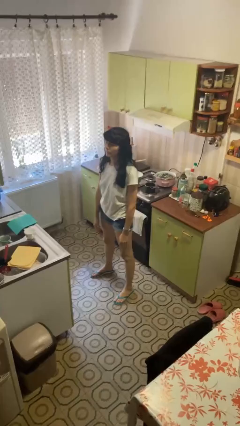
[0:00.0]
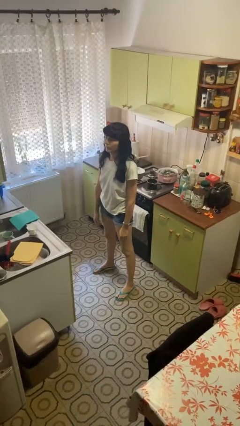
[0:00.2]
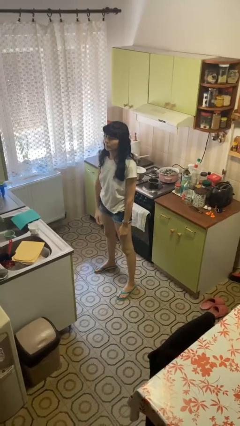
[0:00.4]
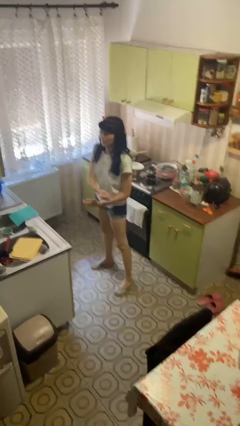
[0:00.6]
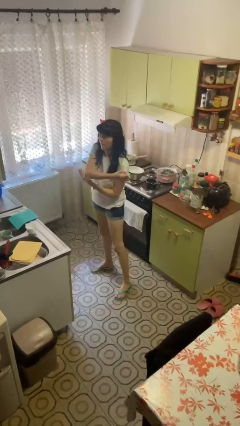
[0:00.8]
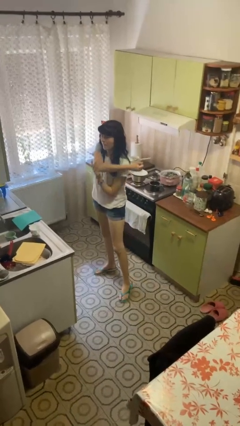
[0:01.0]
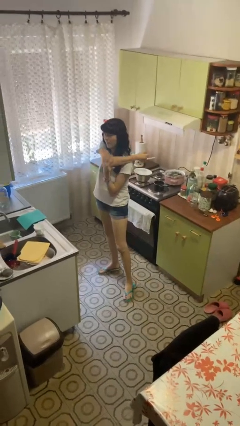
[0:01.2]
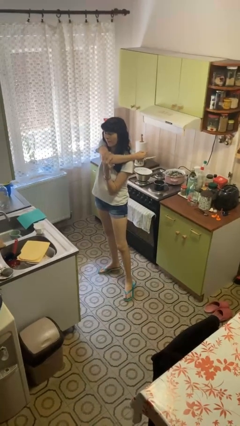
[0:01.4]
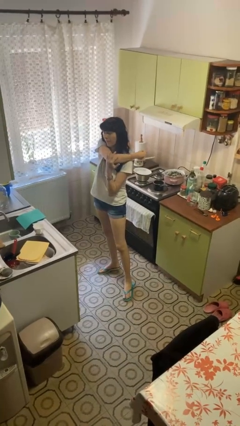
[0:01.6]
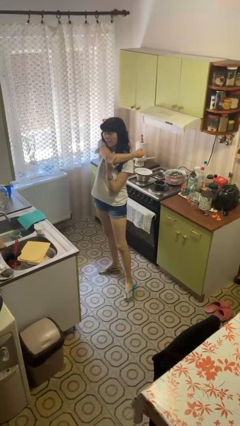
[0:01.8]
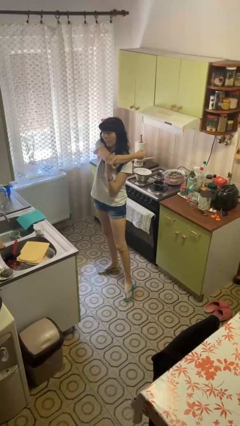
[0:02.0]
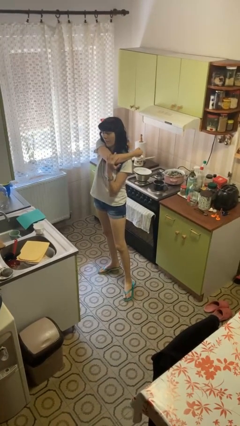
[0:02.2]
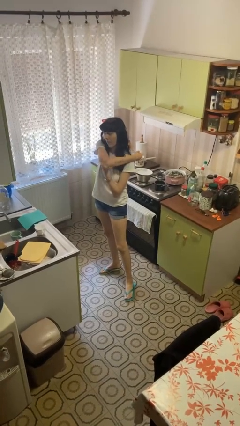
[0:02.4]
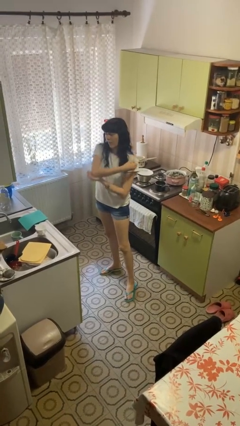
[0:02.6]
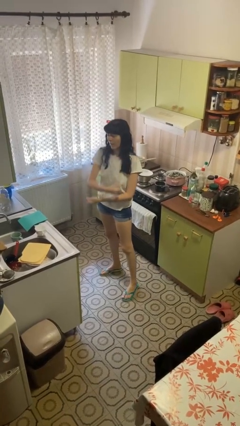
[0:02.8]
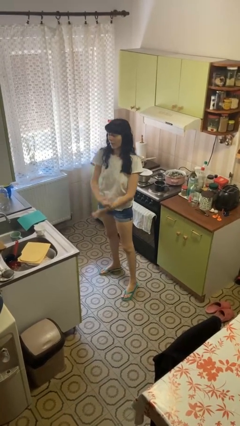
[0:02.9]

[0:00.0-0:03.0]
person stretches arms to side

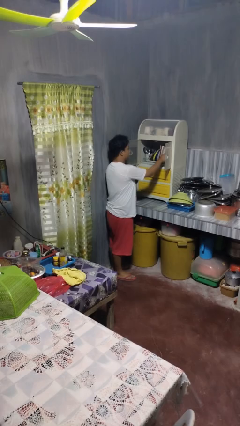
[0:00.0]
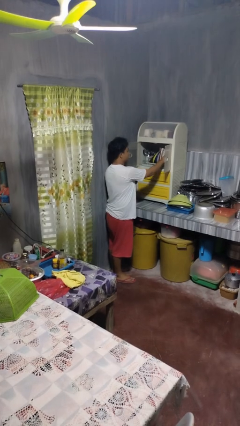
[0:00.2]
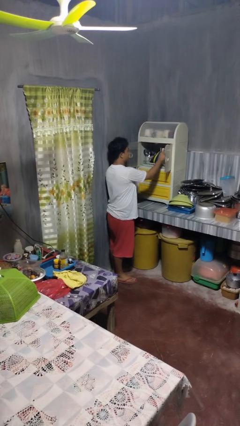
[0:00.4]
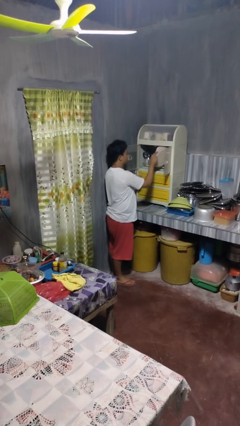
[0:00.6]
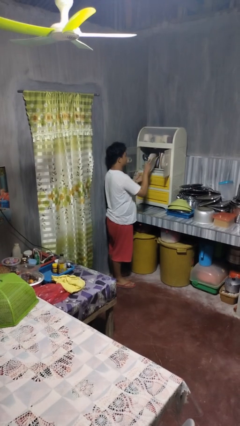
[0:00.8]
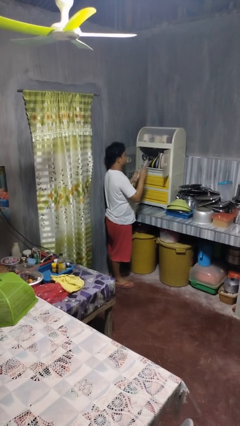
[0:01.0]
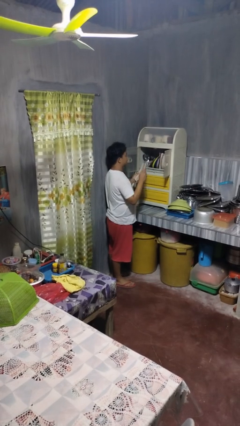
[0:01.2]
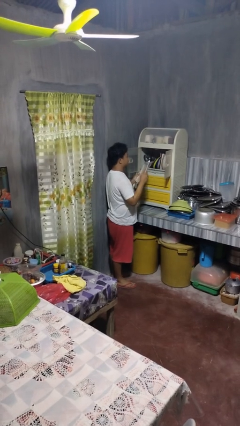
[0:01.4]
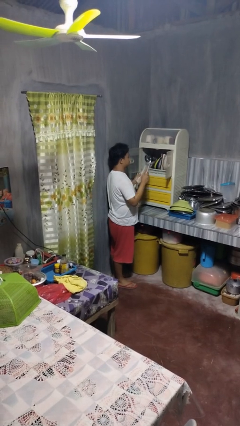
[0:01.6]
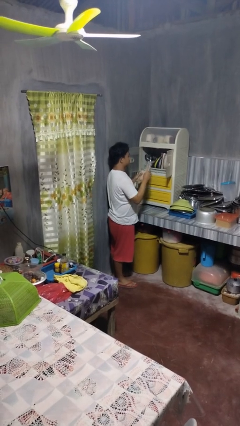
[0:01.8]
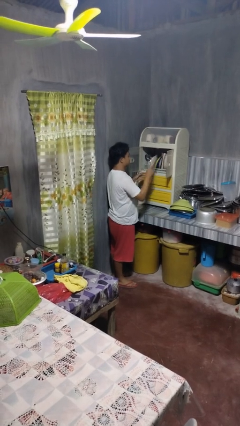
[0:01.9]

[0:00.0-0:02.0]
person picks up object from cabinet

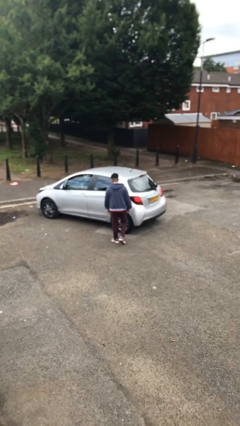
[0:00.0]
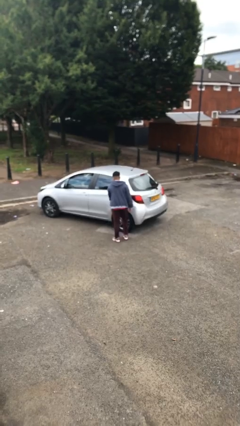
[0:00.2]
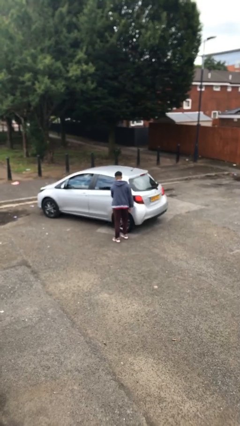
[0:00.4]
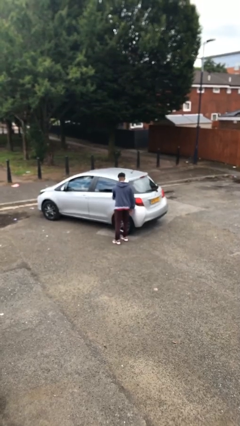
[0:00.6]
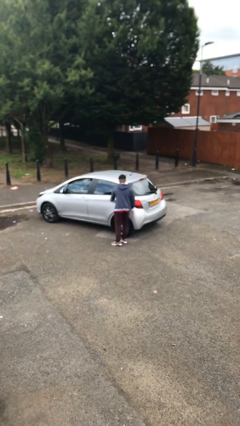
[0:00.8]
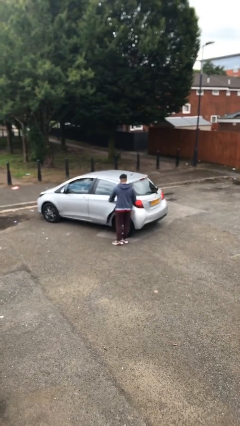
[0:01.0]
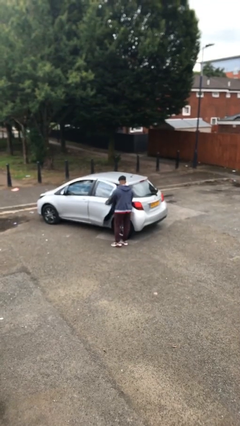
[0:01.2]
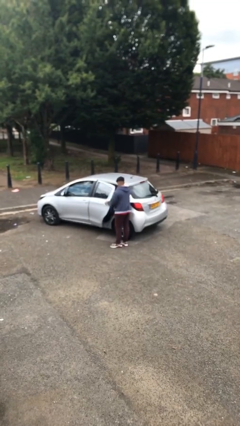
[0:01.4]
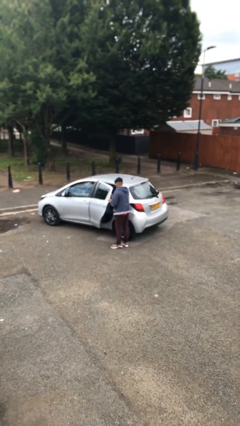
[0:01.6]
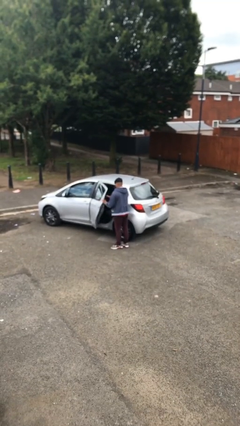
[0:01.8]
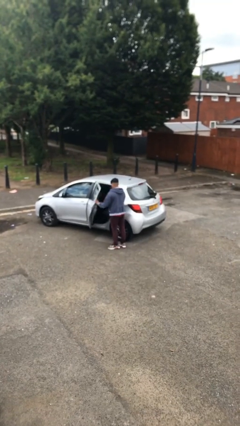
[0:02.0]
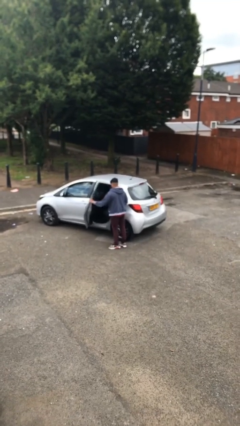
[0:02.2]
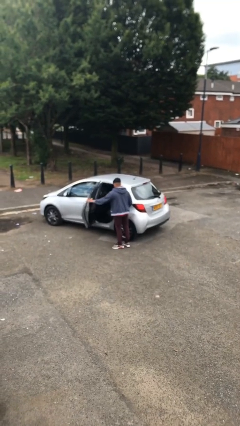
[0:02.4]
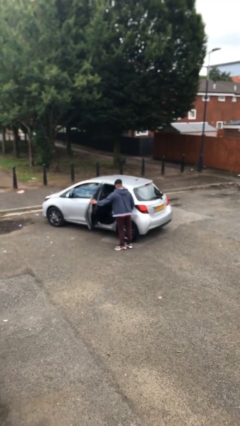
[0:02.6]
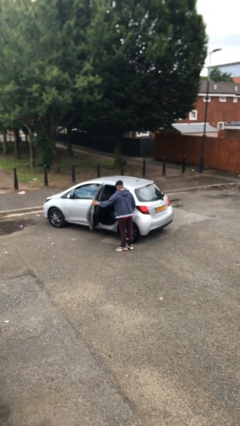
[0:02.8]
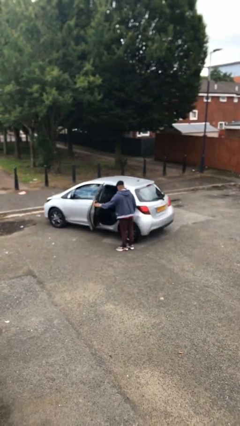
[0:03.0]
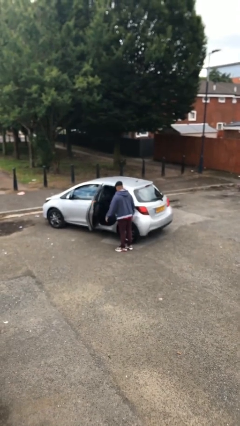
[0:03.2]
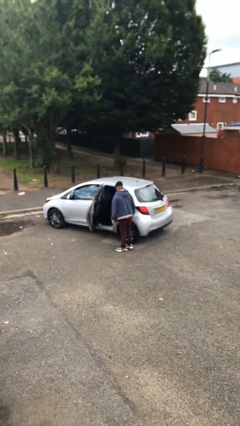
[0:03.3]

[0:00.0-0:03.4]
person opens car door

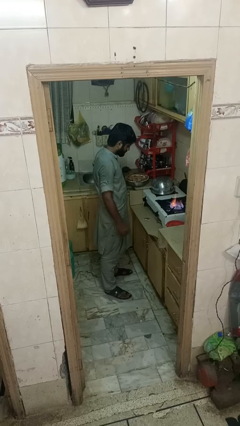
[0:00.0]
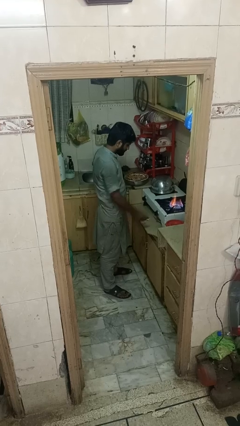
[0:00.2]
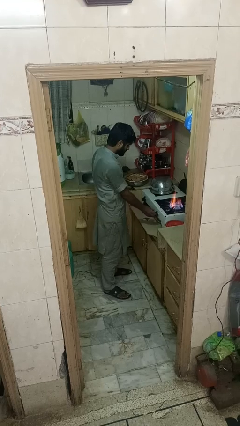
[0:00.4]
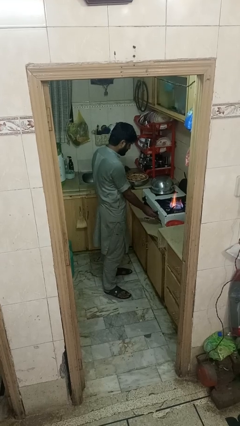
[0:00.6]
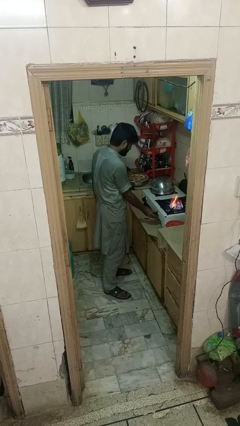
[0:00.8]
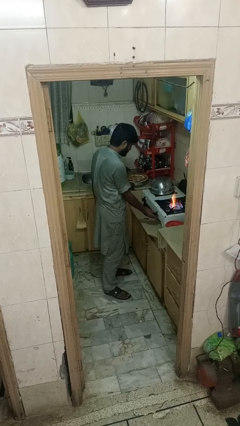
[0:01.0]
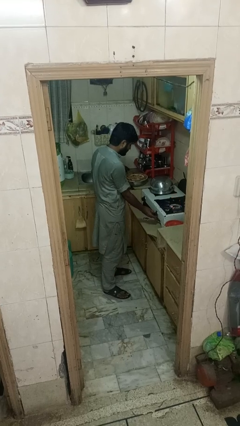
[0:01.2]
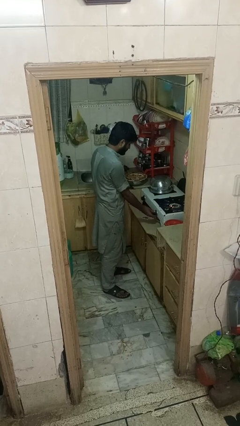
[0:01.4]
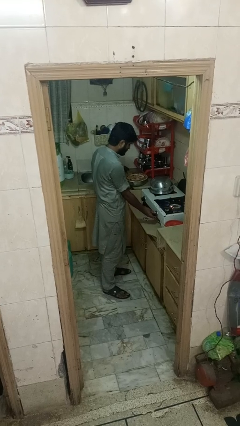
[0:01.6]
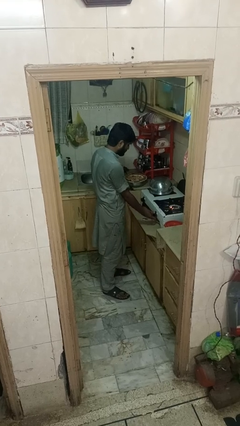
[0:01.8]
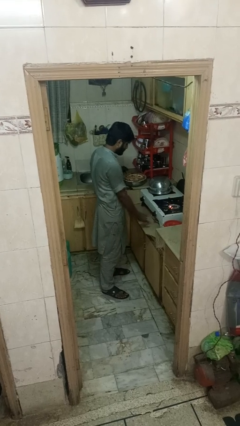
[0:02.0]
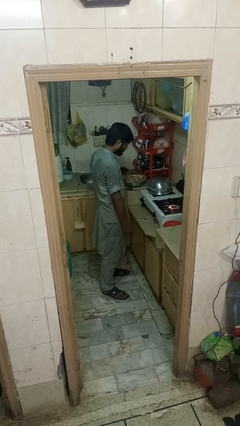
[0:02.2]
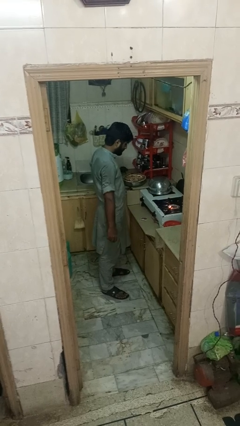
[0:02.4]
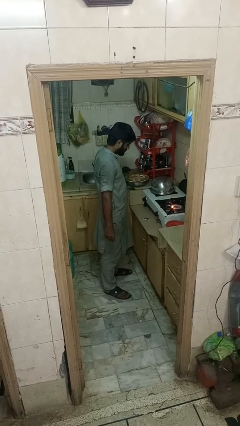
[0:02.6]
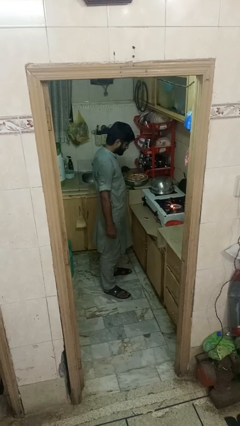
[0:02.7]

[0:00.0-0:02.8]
person turns off stovetop

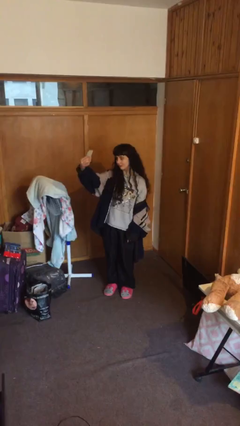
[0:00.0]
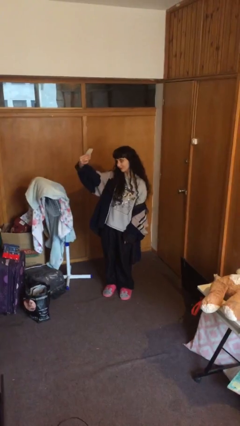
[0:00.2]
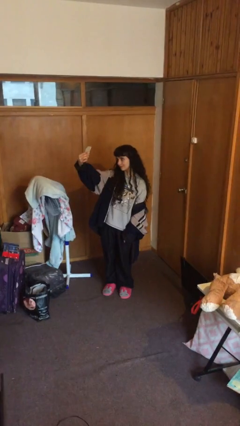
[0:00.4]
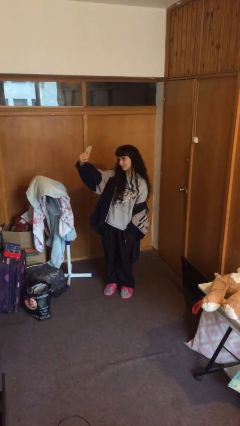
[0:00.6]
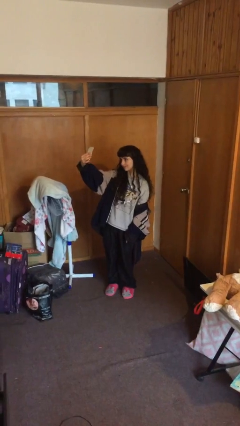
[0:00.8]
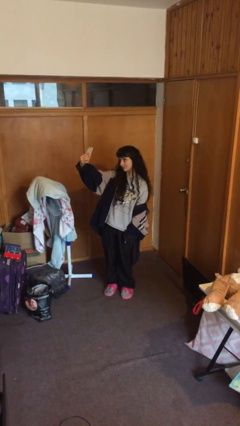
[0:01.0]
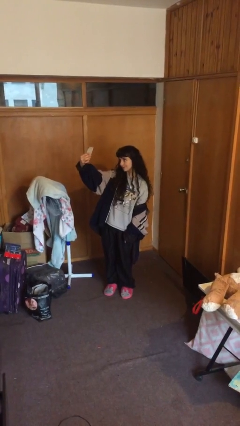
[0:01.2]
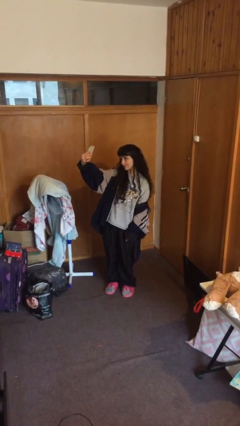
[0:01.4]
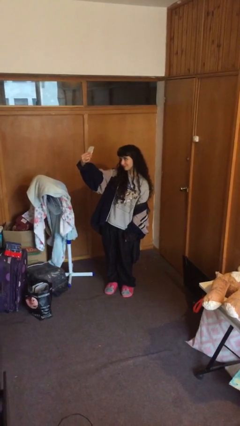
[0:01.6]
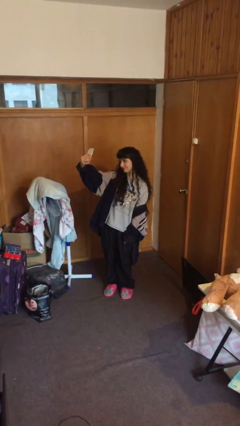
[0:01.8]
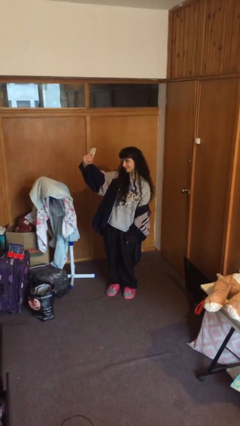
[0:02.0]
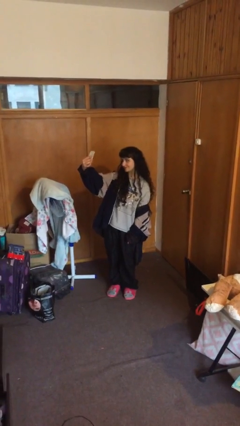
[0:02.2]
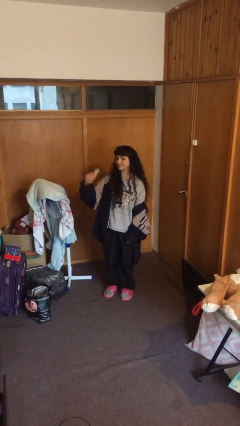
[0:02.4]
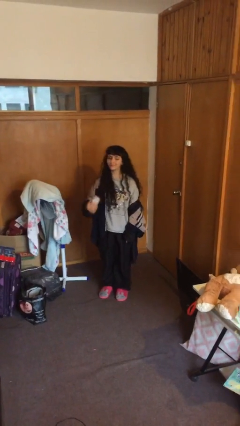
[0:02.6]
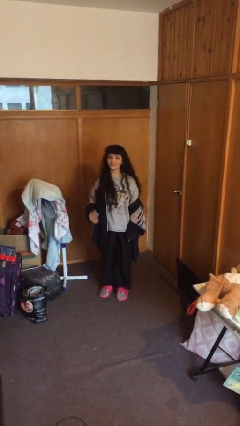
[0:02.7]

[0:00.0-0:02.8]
person takes selfie

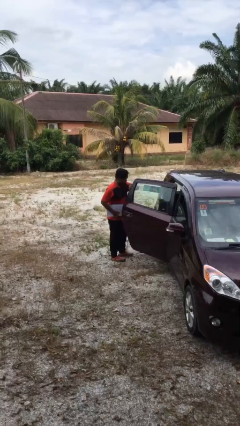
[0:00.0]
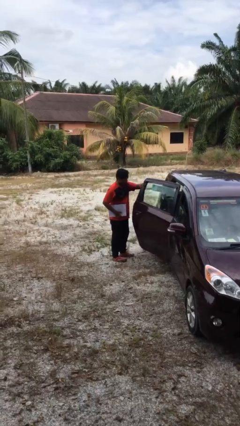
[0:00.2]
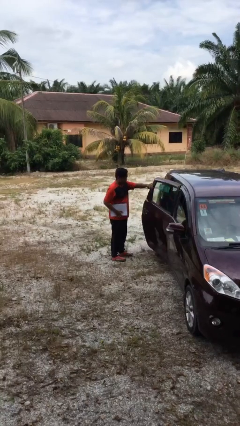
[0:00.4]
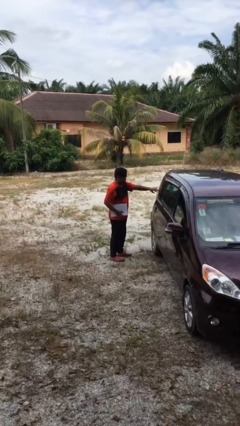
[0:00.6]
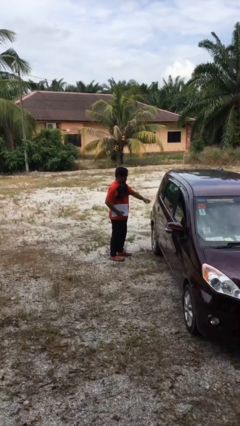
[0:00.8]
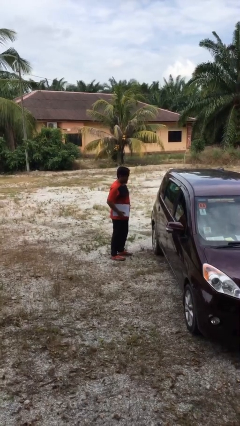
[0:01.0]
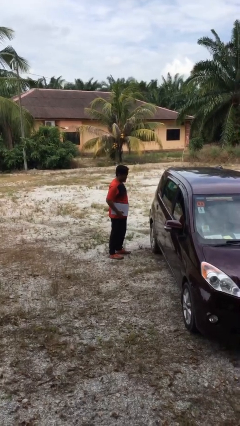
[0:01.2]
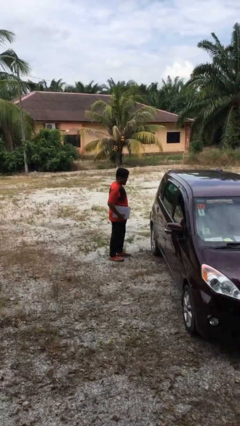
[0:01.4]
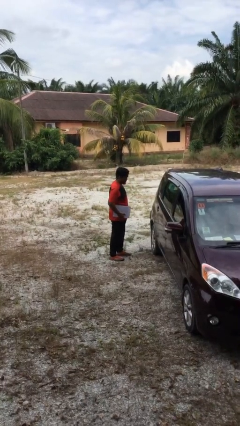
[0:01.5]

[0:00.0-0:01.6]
person closes car door

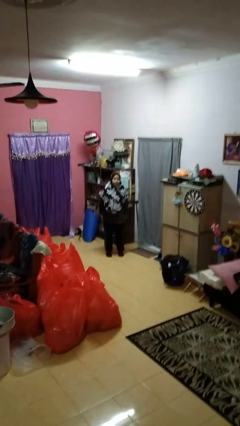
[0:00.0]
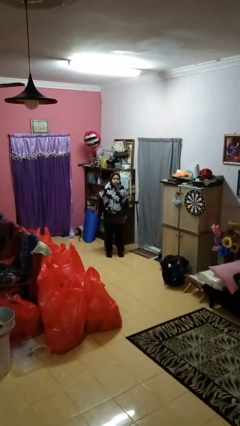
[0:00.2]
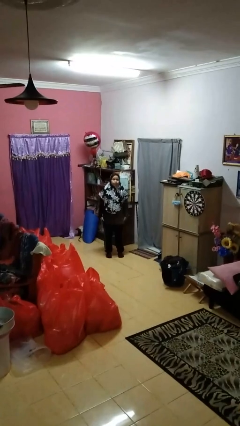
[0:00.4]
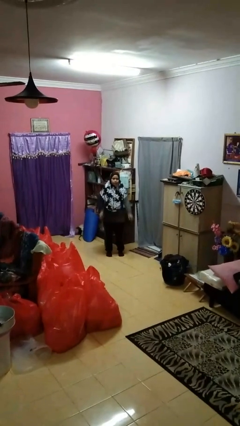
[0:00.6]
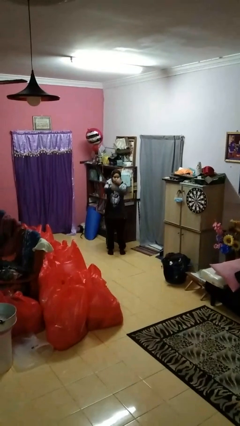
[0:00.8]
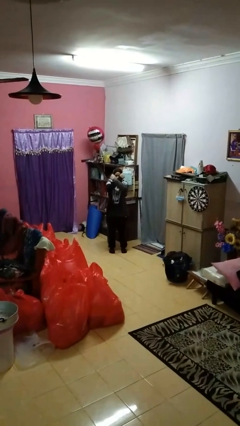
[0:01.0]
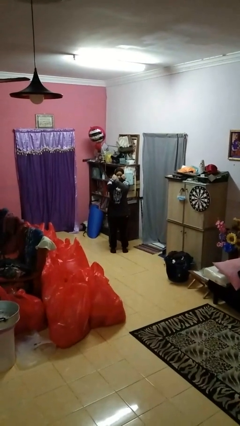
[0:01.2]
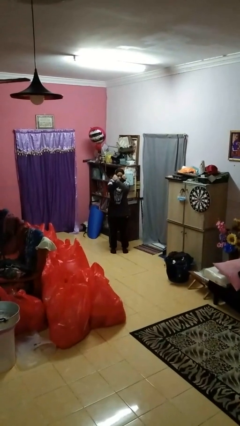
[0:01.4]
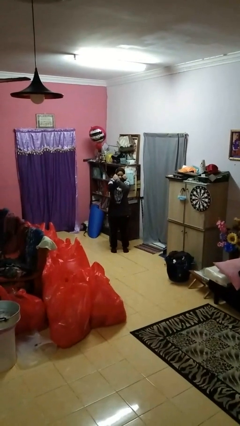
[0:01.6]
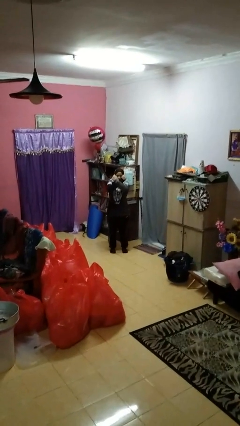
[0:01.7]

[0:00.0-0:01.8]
person crosses arms
